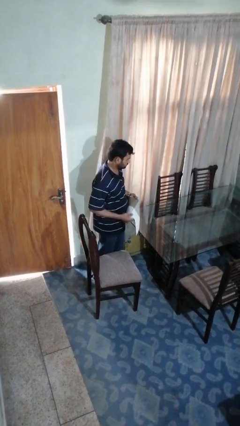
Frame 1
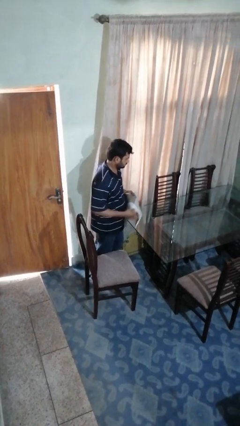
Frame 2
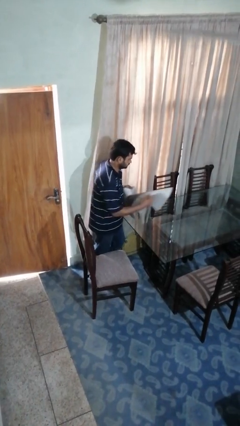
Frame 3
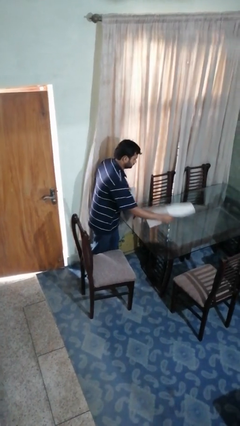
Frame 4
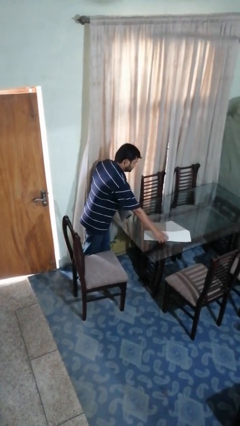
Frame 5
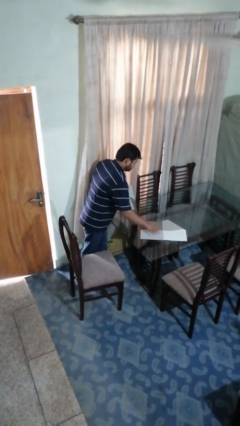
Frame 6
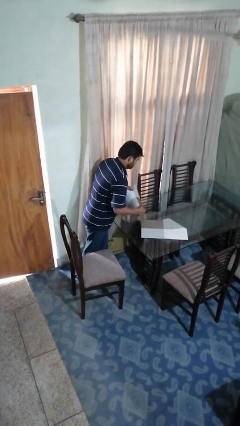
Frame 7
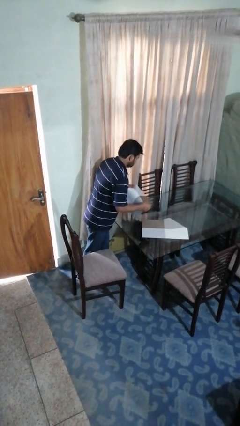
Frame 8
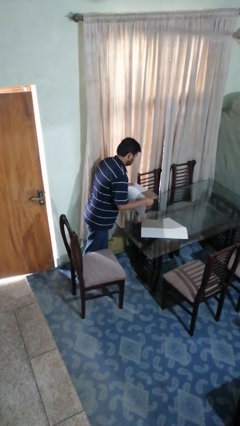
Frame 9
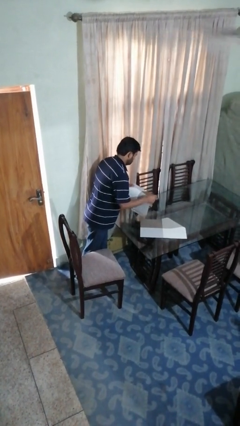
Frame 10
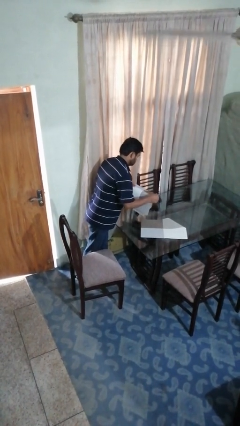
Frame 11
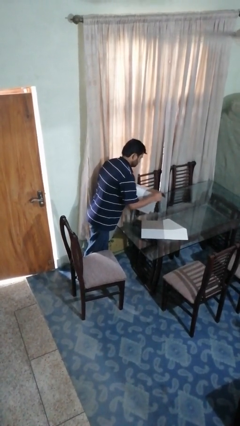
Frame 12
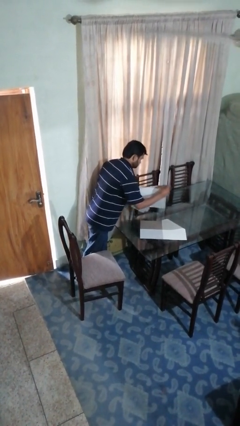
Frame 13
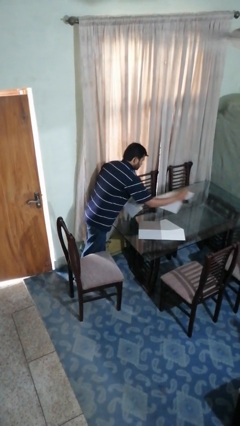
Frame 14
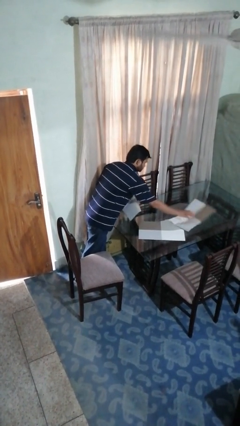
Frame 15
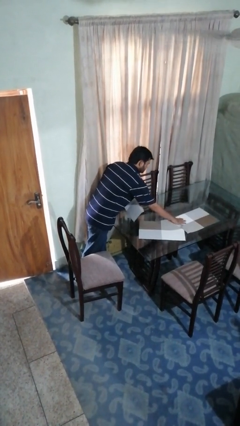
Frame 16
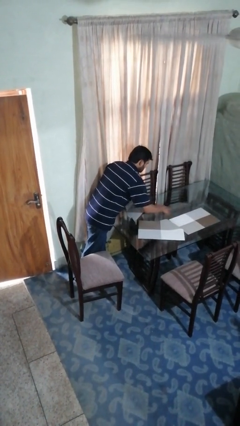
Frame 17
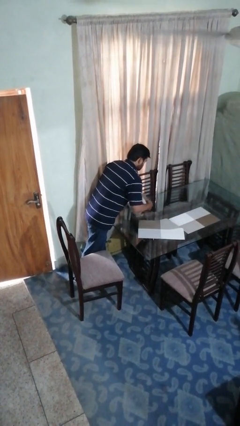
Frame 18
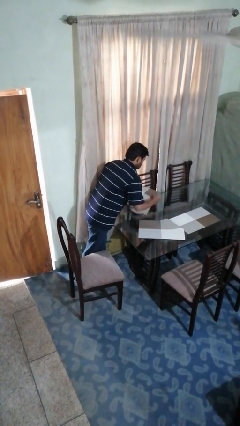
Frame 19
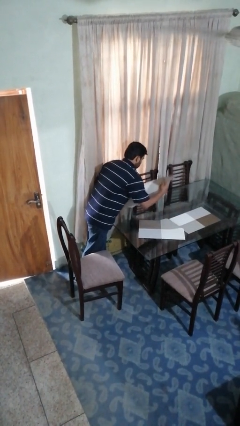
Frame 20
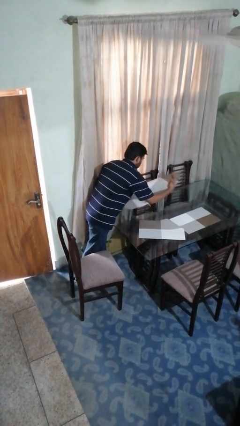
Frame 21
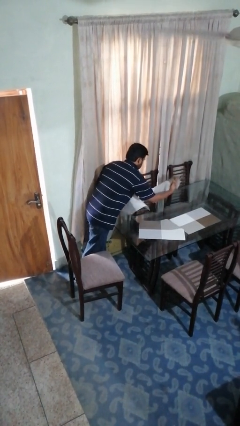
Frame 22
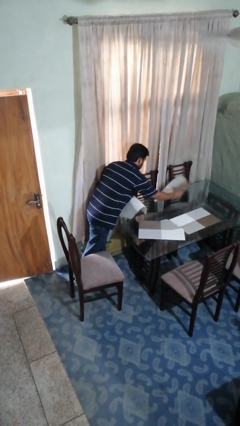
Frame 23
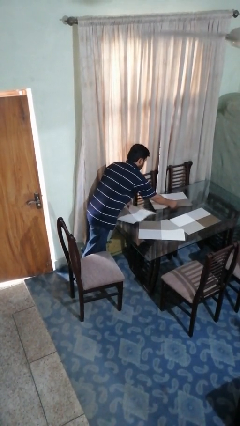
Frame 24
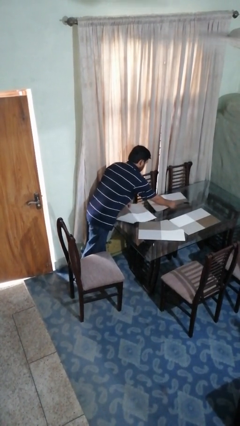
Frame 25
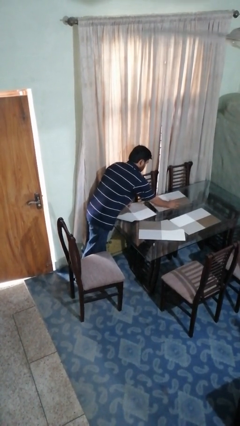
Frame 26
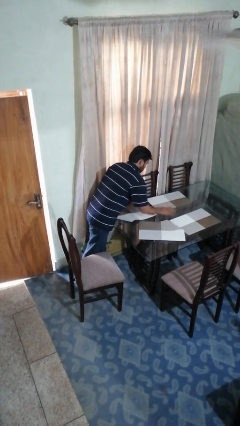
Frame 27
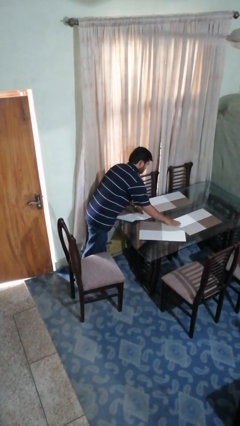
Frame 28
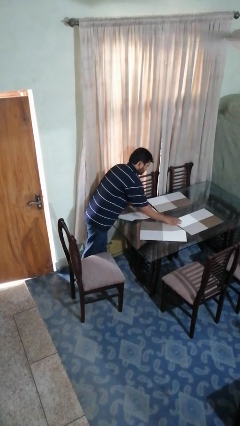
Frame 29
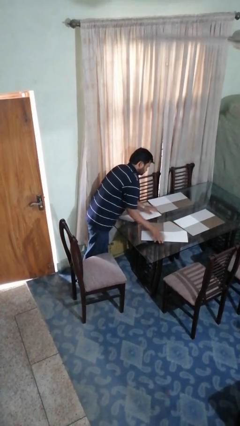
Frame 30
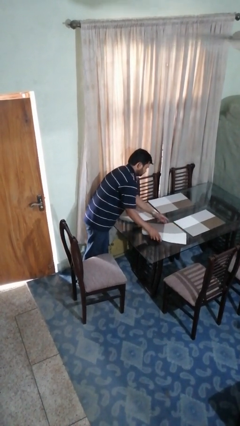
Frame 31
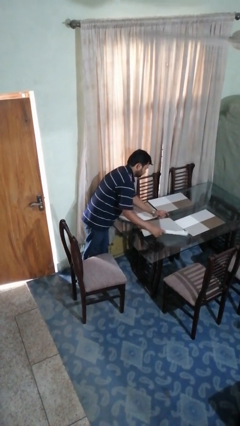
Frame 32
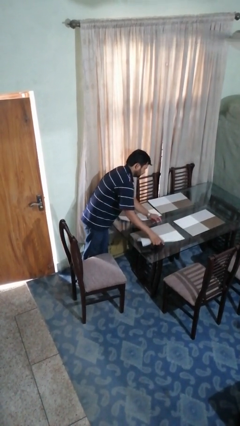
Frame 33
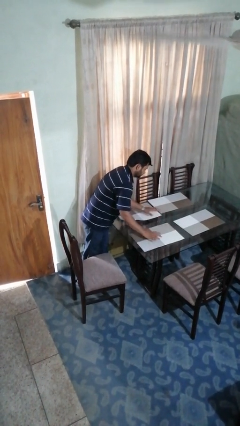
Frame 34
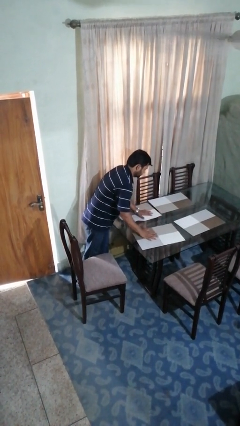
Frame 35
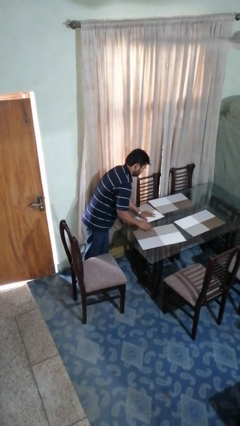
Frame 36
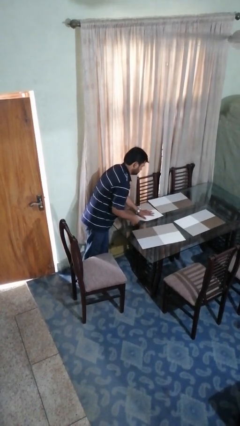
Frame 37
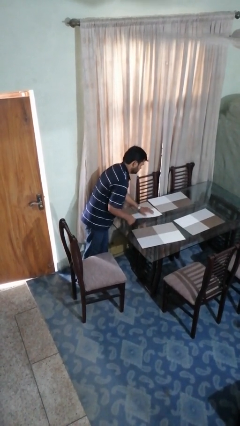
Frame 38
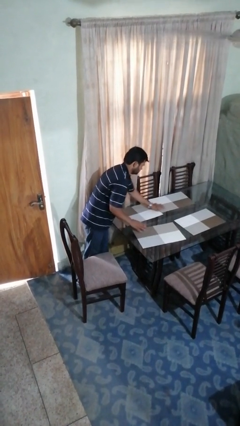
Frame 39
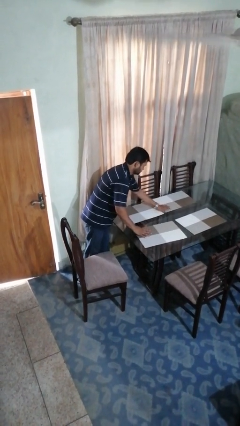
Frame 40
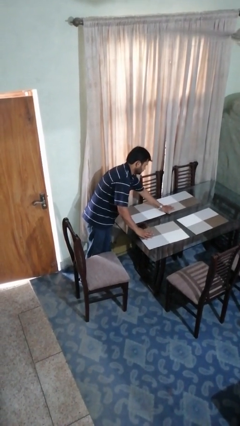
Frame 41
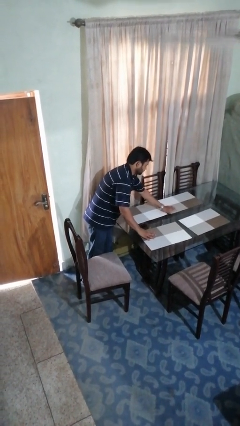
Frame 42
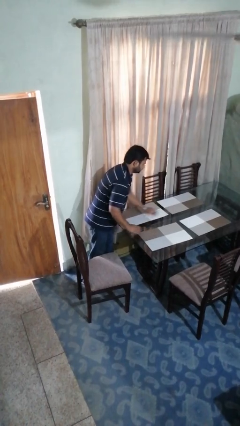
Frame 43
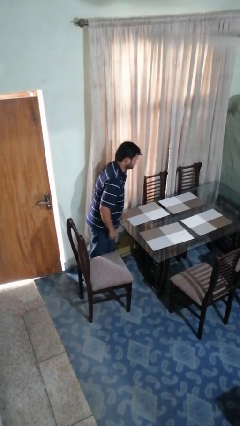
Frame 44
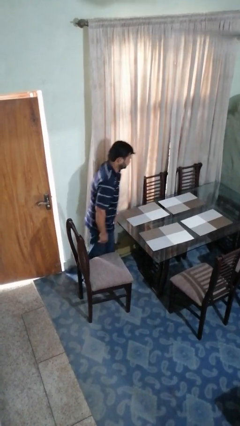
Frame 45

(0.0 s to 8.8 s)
person spreads tablecloth

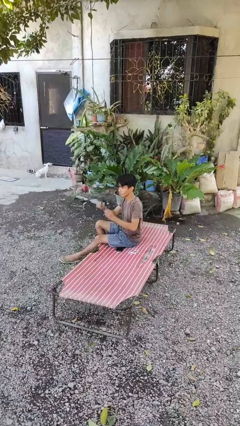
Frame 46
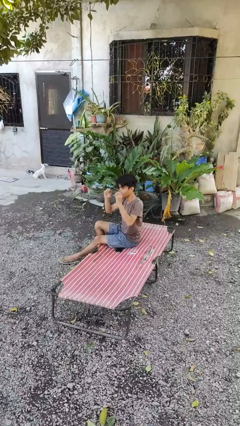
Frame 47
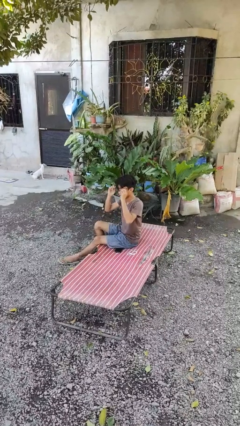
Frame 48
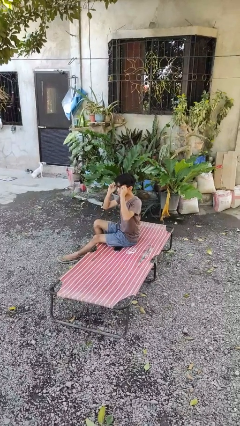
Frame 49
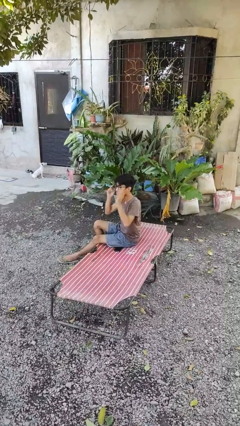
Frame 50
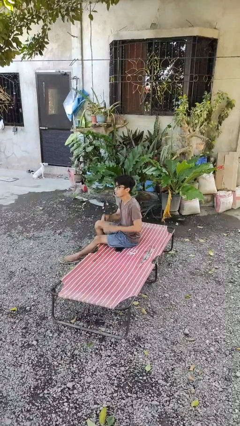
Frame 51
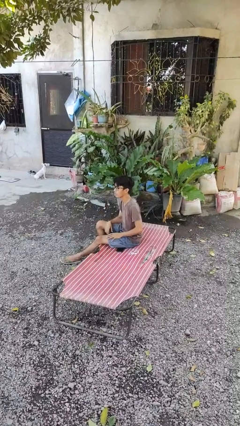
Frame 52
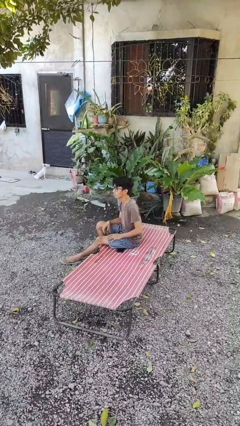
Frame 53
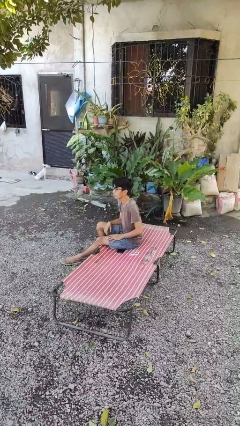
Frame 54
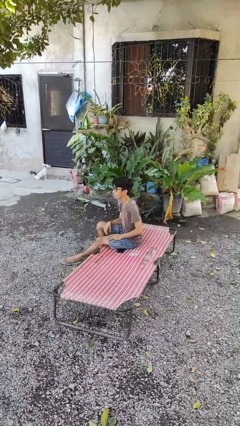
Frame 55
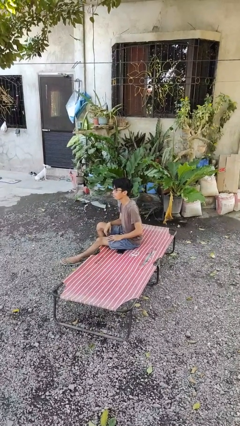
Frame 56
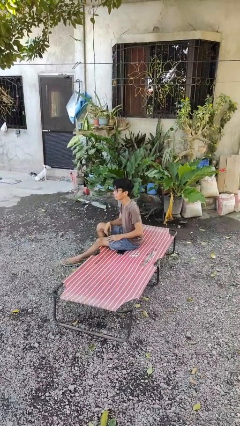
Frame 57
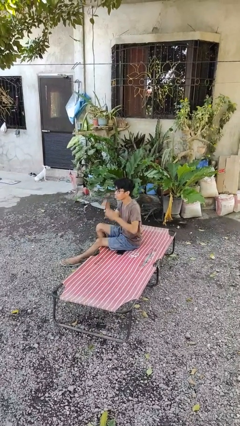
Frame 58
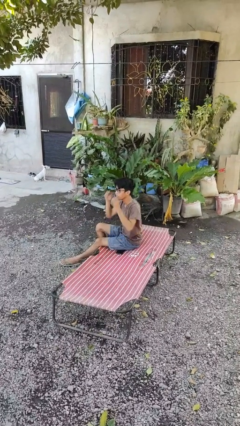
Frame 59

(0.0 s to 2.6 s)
person puts on glasses

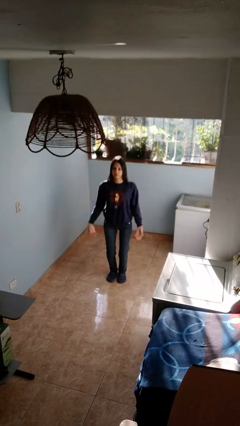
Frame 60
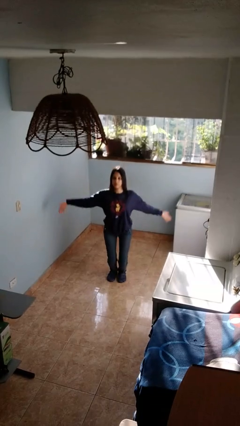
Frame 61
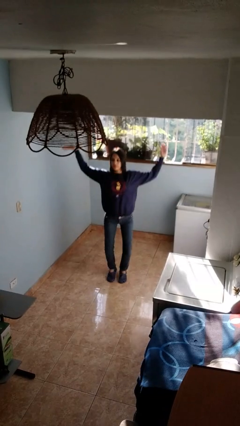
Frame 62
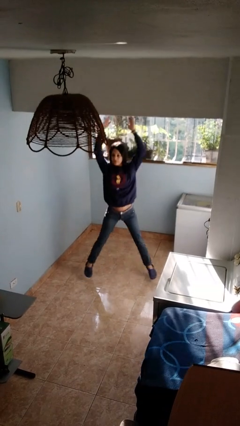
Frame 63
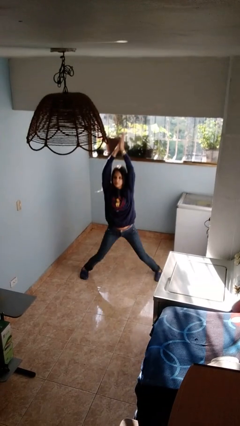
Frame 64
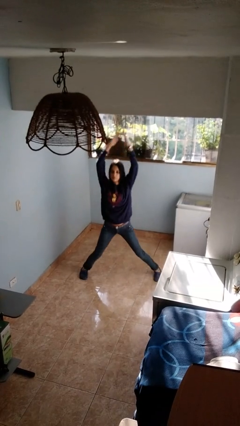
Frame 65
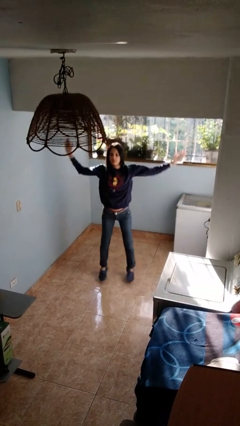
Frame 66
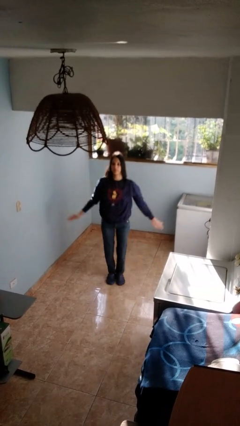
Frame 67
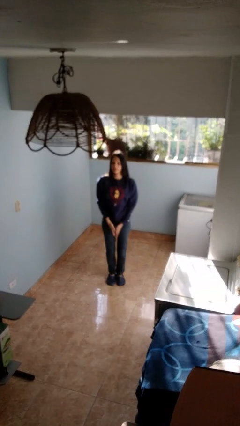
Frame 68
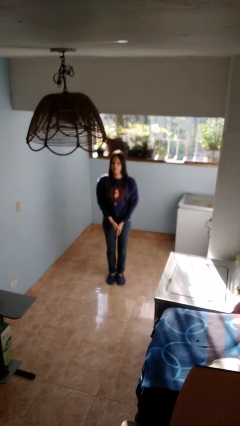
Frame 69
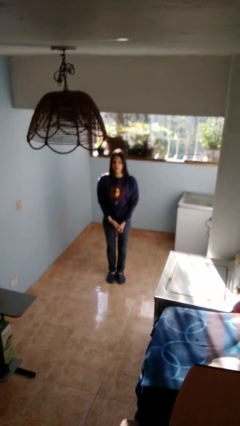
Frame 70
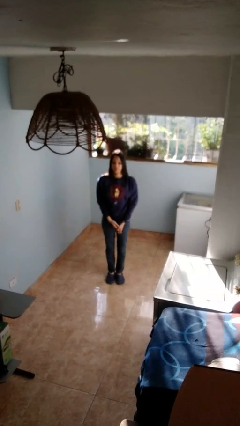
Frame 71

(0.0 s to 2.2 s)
person exercises with jumping jacks

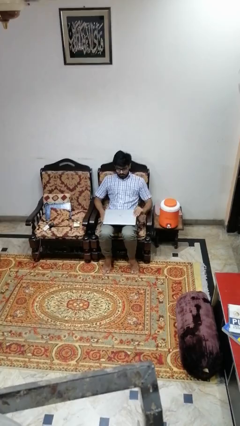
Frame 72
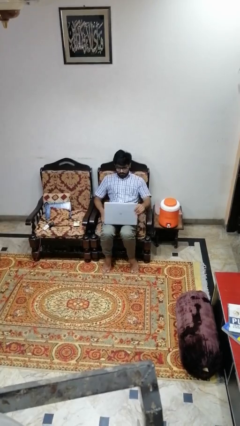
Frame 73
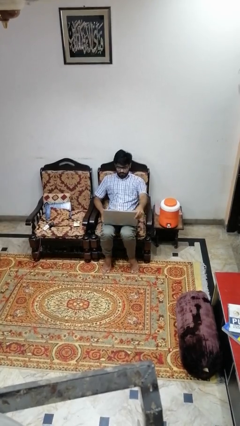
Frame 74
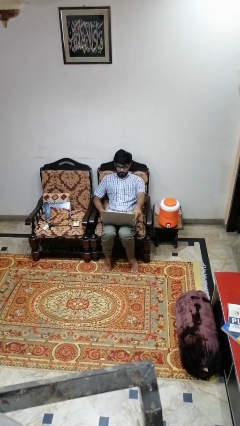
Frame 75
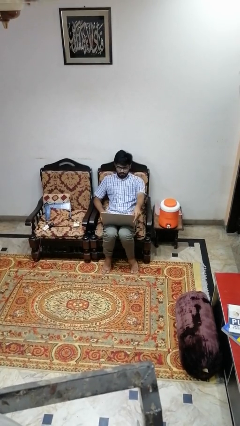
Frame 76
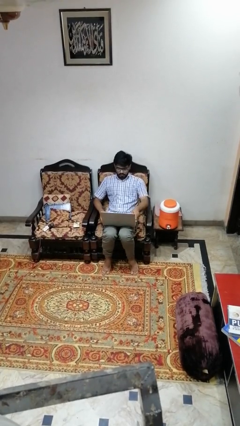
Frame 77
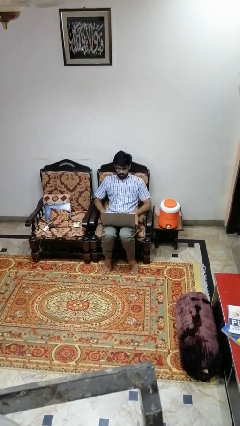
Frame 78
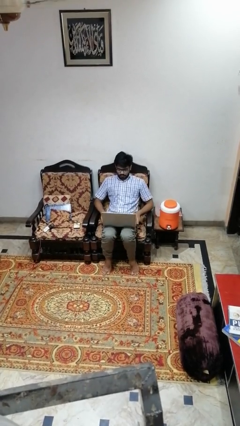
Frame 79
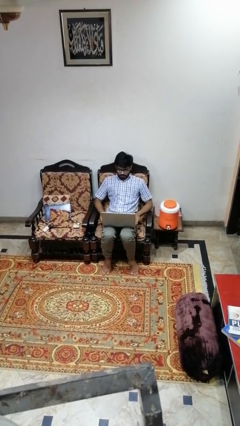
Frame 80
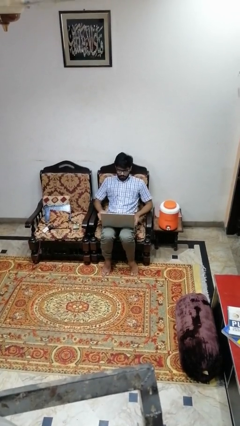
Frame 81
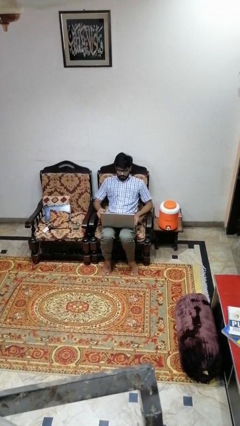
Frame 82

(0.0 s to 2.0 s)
person opens laptop

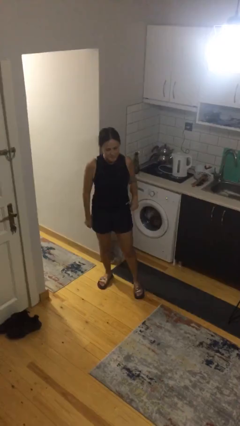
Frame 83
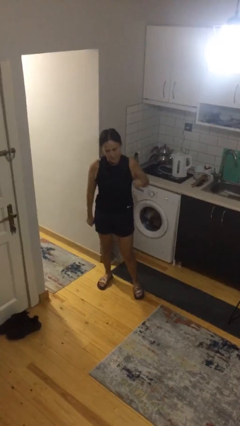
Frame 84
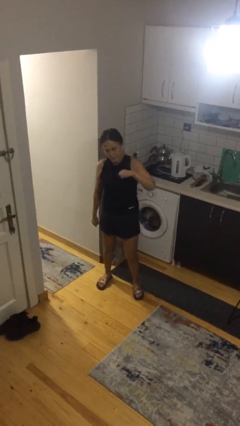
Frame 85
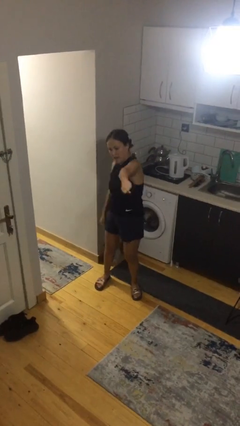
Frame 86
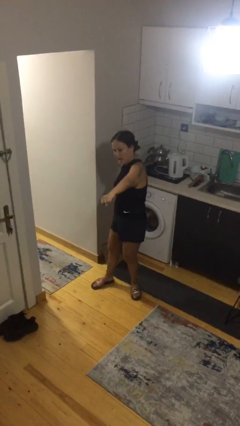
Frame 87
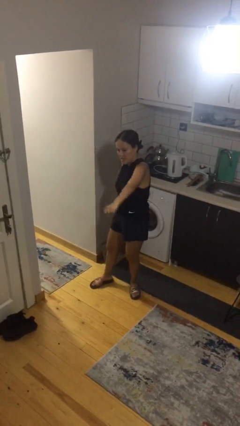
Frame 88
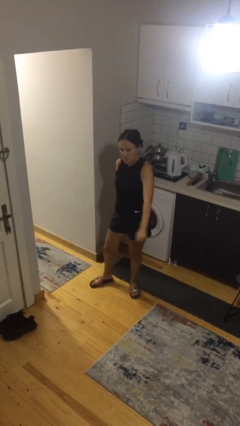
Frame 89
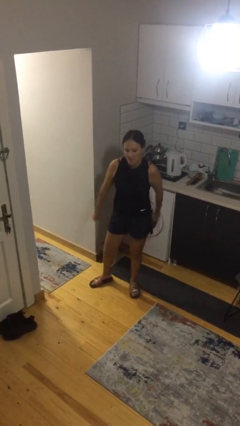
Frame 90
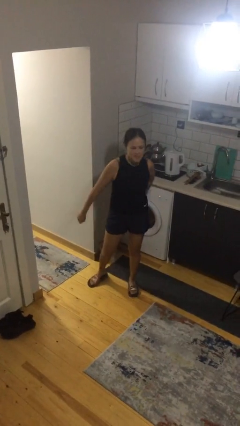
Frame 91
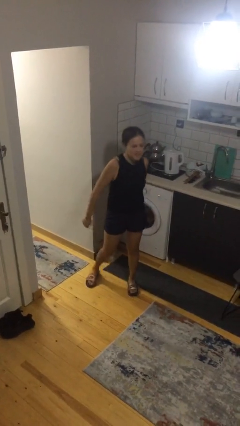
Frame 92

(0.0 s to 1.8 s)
person punches

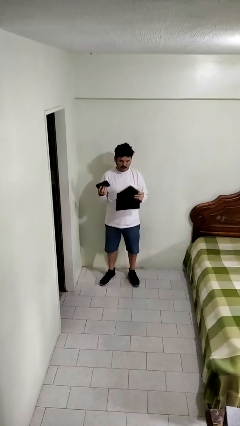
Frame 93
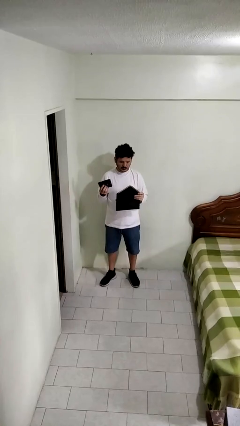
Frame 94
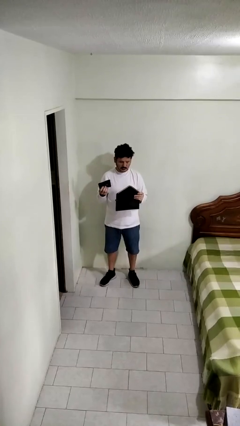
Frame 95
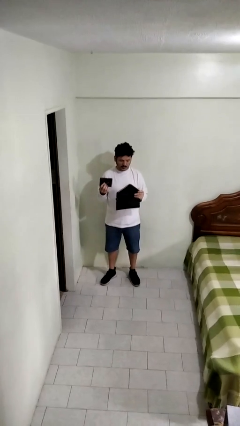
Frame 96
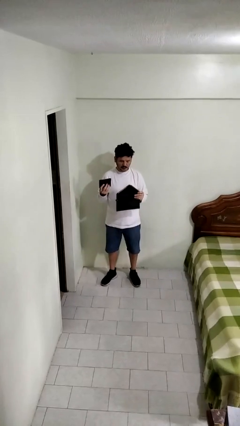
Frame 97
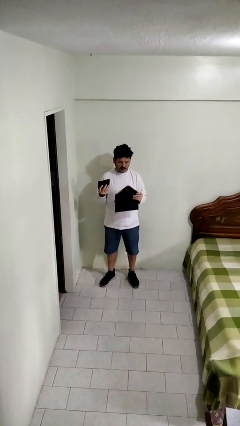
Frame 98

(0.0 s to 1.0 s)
person takes object from purse
